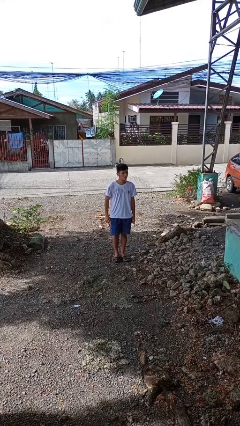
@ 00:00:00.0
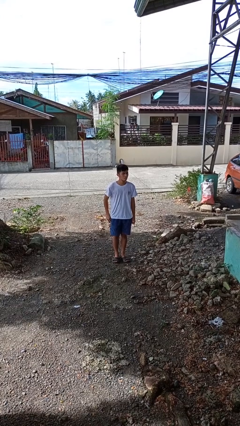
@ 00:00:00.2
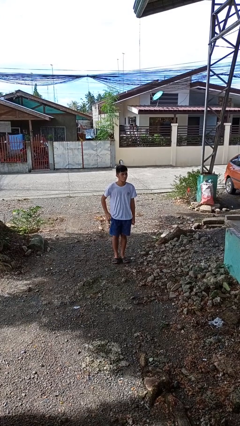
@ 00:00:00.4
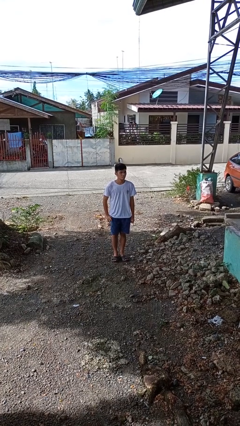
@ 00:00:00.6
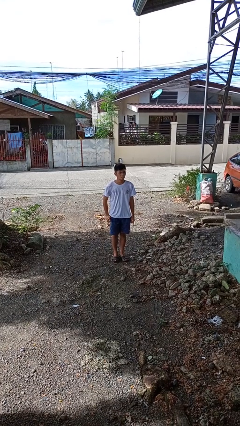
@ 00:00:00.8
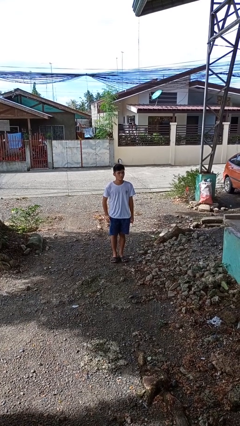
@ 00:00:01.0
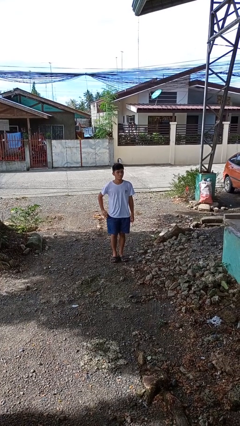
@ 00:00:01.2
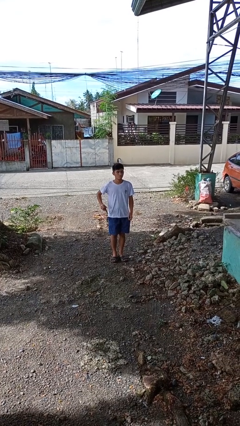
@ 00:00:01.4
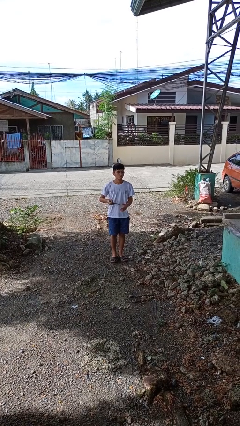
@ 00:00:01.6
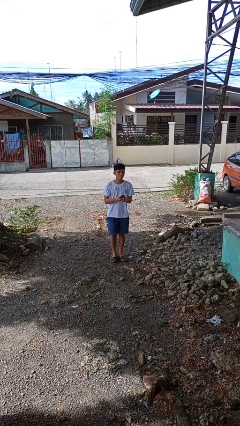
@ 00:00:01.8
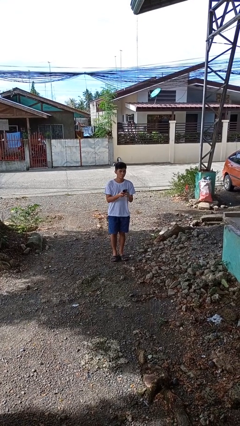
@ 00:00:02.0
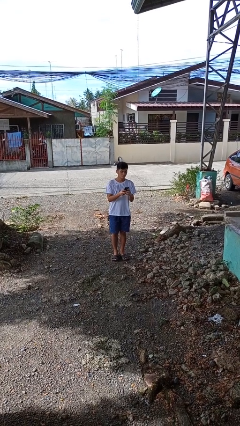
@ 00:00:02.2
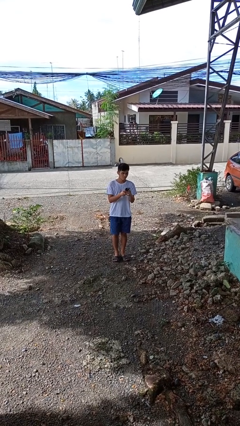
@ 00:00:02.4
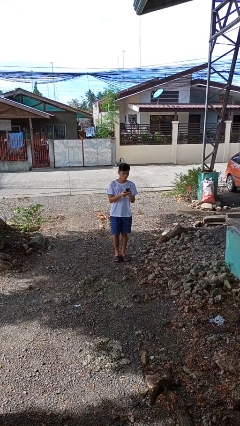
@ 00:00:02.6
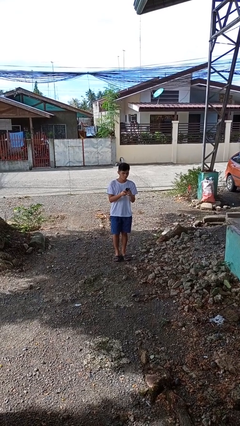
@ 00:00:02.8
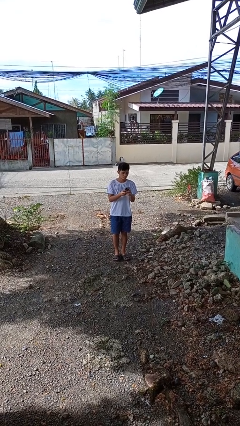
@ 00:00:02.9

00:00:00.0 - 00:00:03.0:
person takes phone from pocket

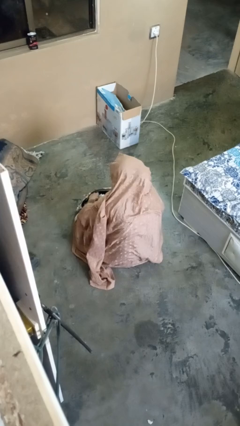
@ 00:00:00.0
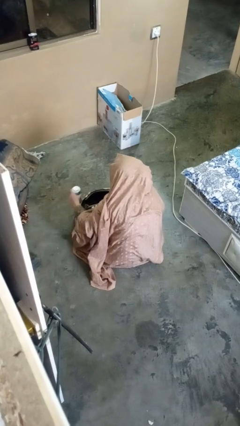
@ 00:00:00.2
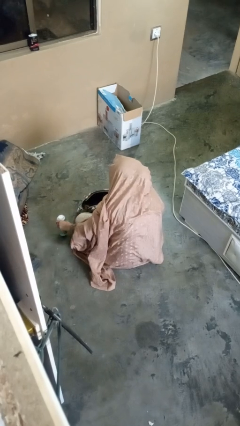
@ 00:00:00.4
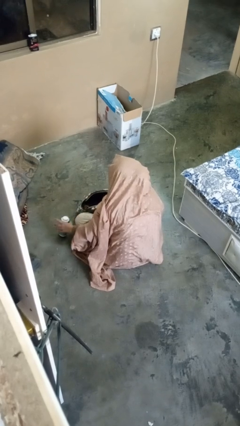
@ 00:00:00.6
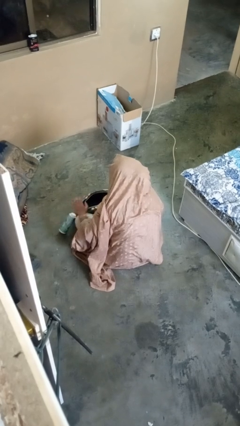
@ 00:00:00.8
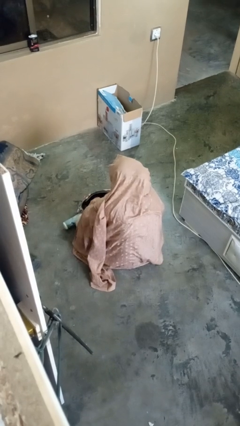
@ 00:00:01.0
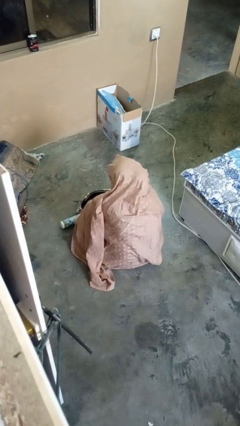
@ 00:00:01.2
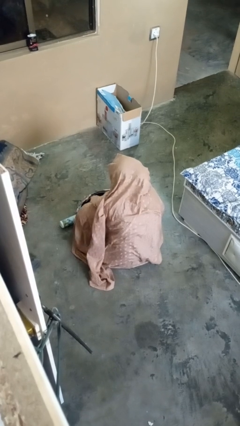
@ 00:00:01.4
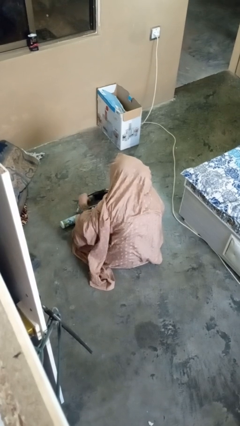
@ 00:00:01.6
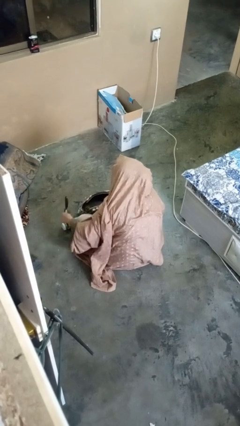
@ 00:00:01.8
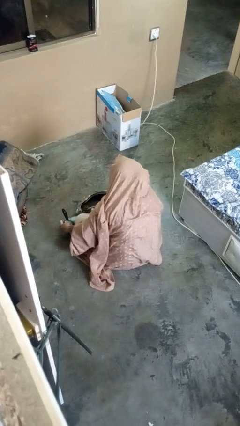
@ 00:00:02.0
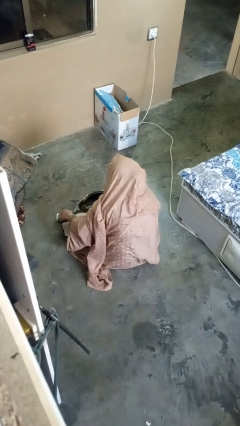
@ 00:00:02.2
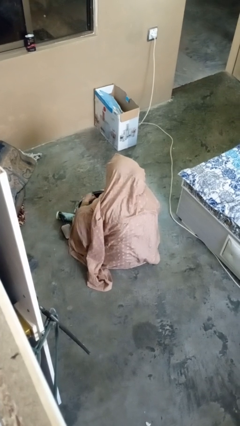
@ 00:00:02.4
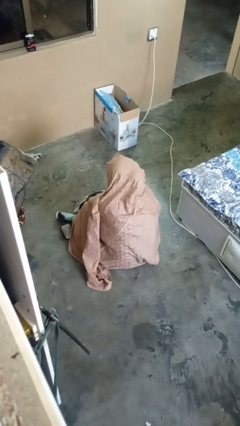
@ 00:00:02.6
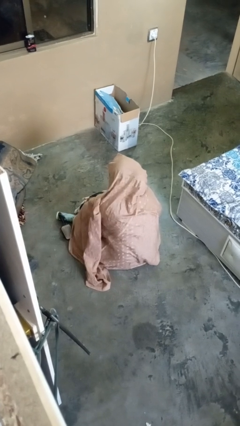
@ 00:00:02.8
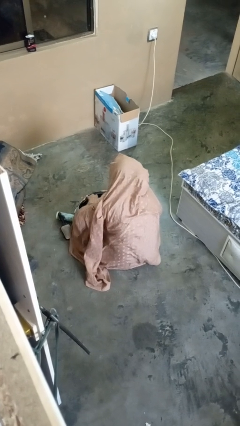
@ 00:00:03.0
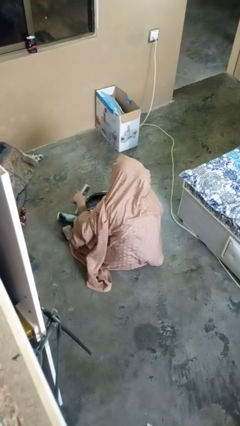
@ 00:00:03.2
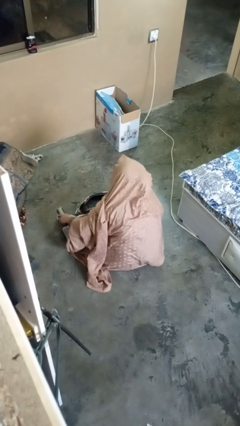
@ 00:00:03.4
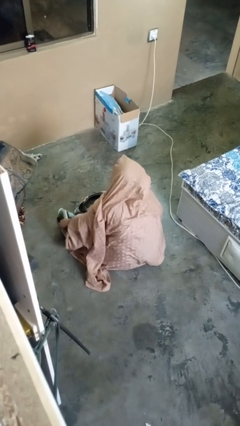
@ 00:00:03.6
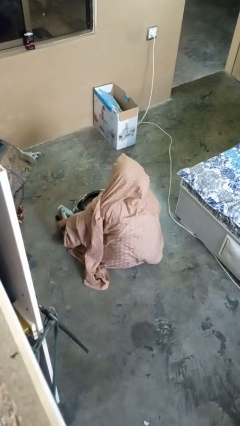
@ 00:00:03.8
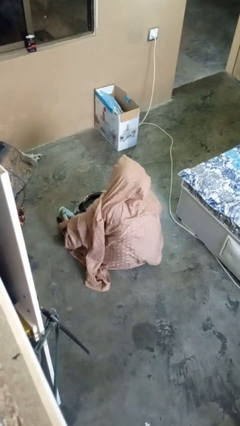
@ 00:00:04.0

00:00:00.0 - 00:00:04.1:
person takes object from purse

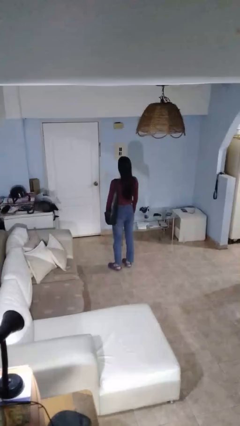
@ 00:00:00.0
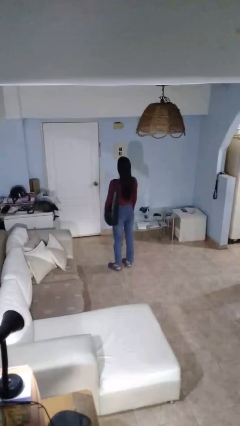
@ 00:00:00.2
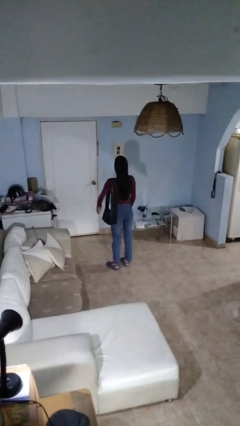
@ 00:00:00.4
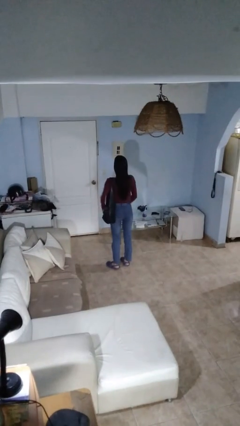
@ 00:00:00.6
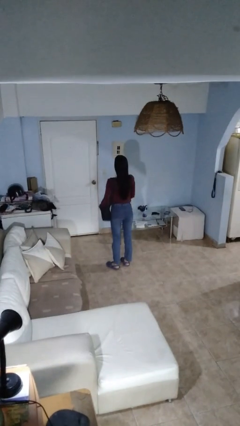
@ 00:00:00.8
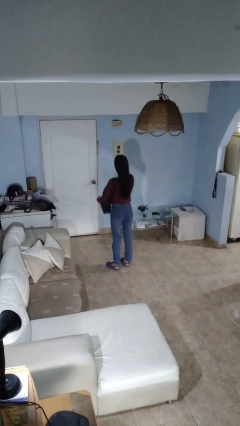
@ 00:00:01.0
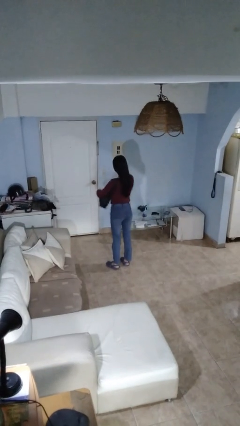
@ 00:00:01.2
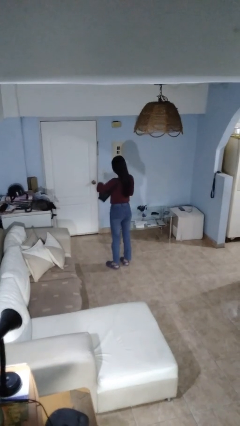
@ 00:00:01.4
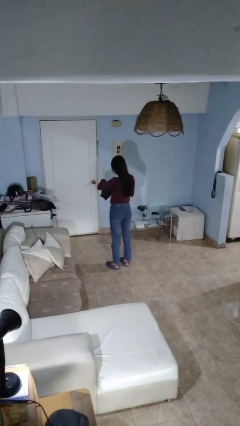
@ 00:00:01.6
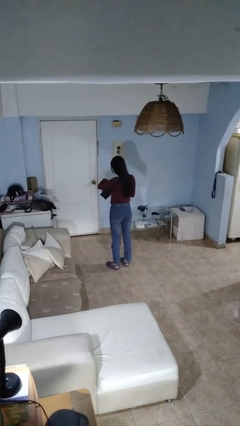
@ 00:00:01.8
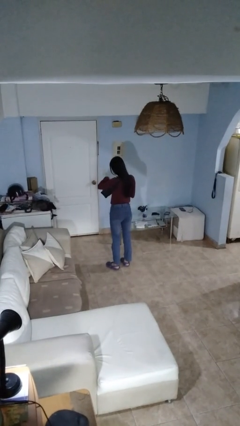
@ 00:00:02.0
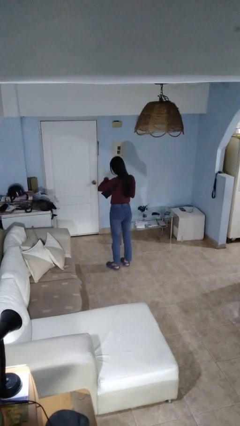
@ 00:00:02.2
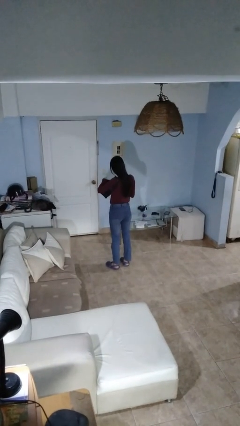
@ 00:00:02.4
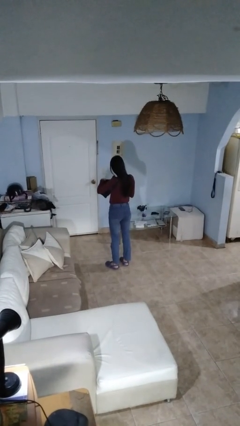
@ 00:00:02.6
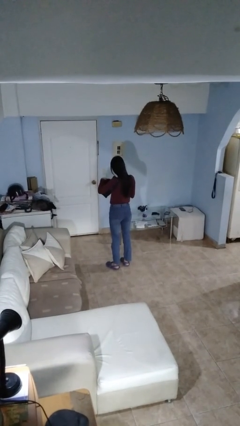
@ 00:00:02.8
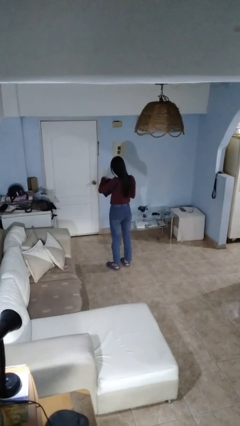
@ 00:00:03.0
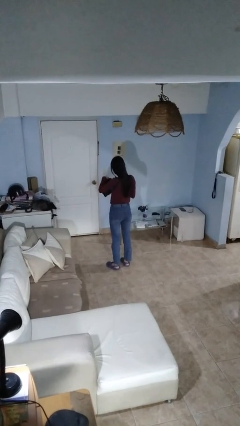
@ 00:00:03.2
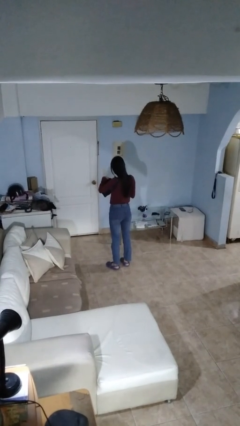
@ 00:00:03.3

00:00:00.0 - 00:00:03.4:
person searches in purse

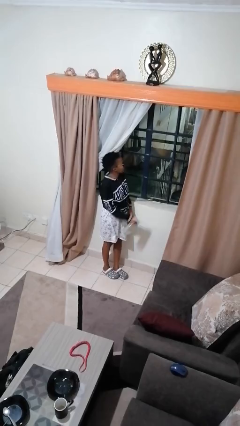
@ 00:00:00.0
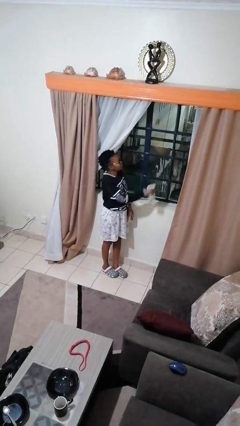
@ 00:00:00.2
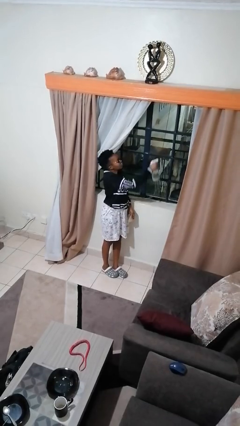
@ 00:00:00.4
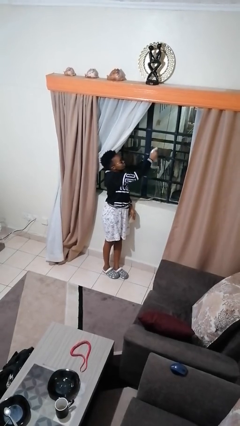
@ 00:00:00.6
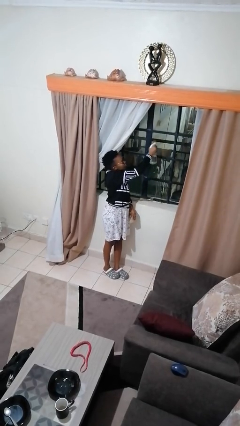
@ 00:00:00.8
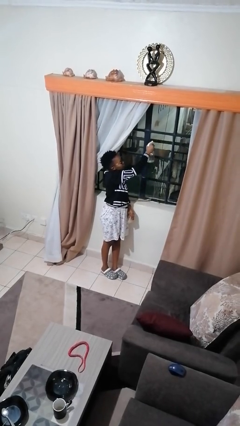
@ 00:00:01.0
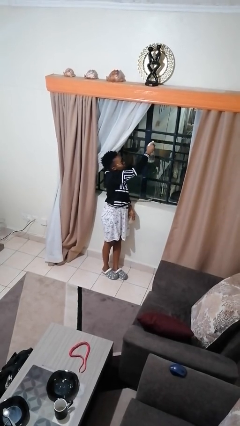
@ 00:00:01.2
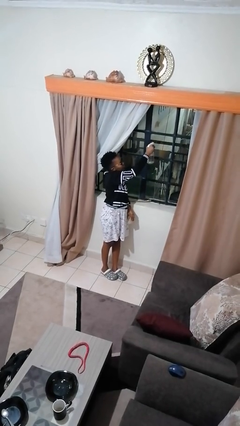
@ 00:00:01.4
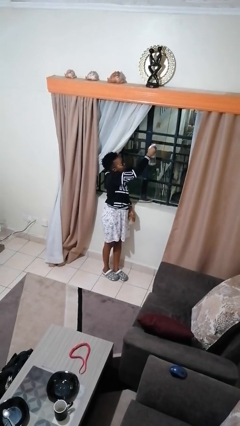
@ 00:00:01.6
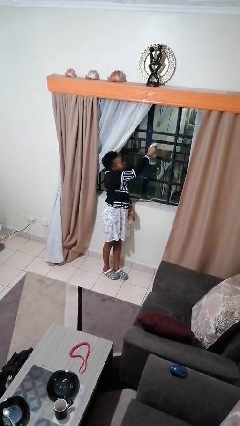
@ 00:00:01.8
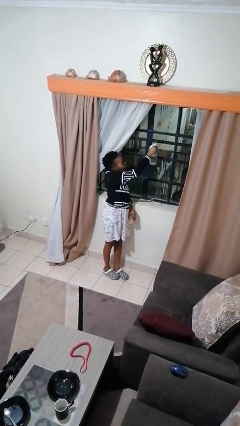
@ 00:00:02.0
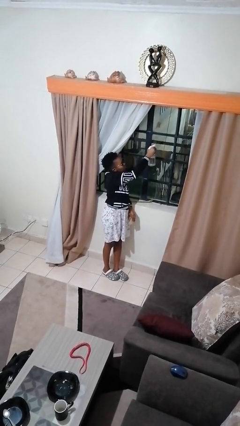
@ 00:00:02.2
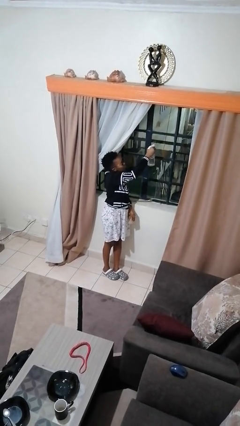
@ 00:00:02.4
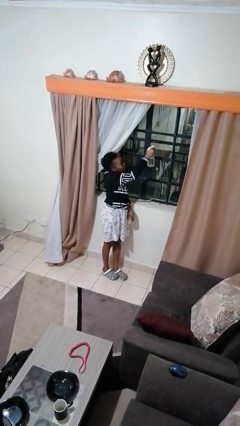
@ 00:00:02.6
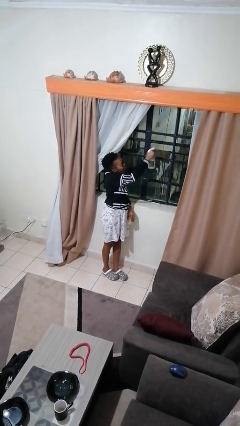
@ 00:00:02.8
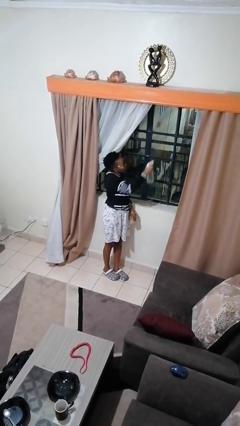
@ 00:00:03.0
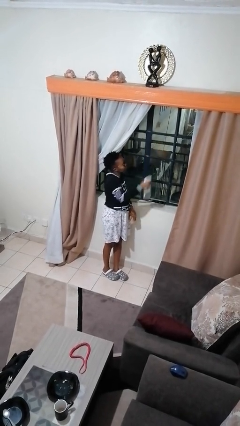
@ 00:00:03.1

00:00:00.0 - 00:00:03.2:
person sprays from bottle

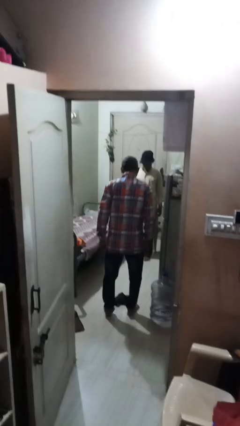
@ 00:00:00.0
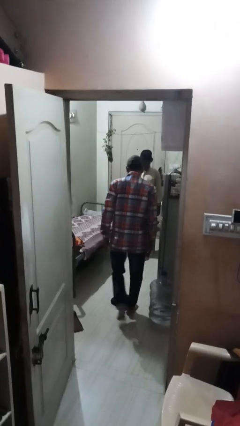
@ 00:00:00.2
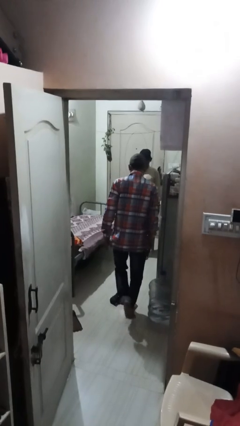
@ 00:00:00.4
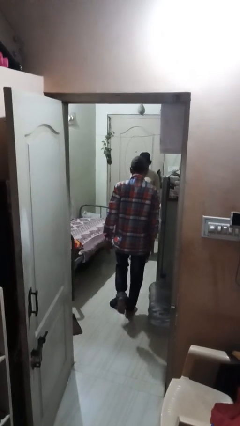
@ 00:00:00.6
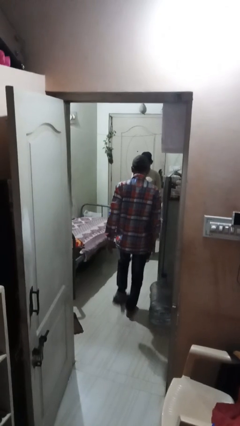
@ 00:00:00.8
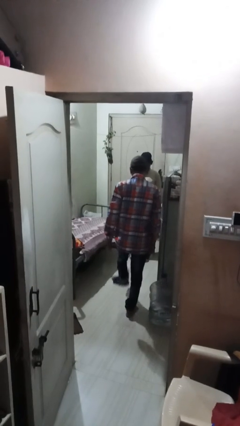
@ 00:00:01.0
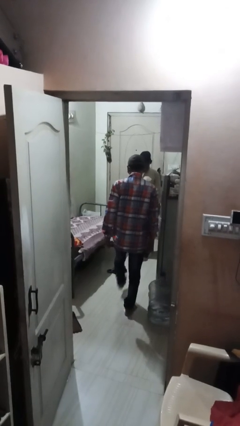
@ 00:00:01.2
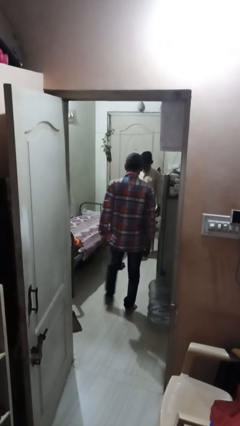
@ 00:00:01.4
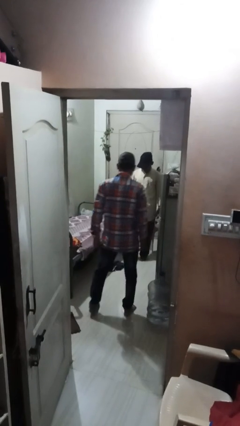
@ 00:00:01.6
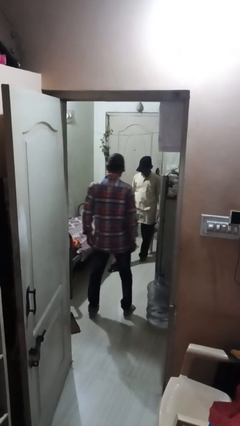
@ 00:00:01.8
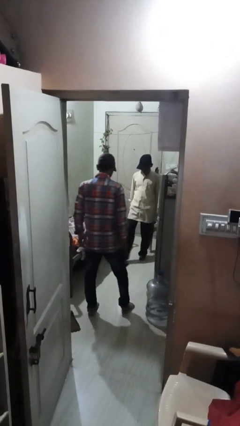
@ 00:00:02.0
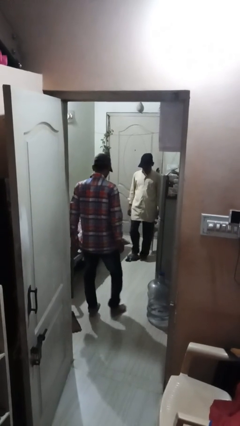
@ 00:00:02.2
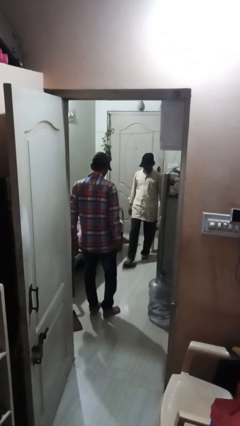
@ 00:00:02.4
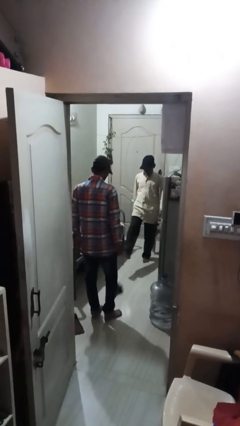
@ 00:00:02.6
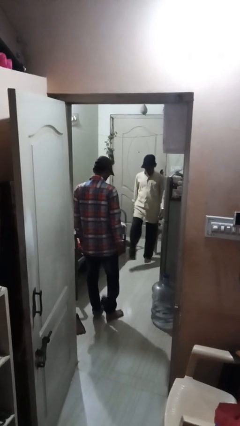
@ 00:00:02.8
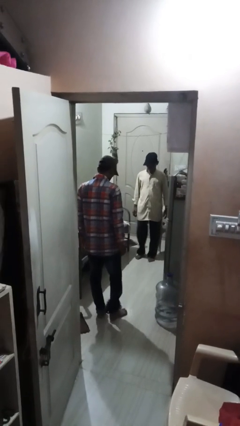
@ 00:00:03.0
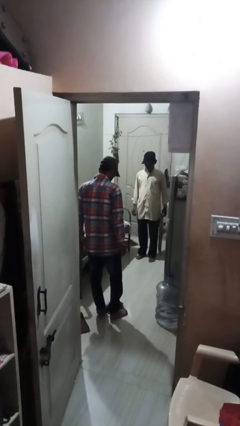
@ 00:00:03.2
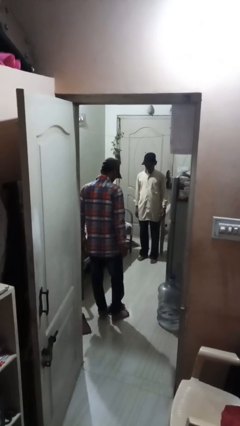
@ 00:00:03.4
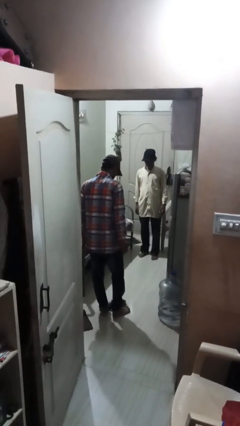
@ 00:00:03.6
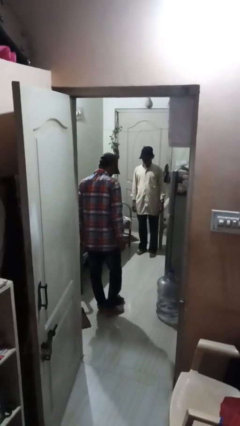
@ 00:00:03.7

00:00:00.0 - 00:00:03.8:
person kicks object to person
